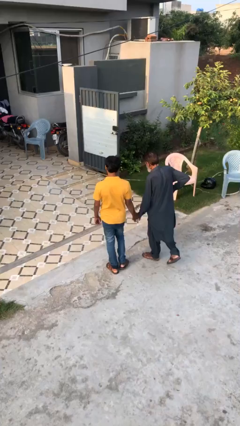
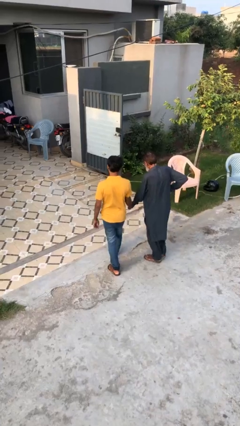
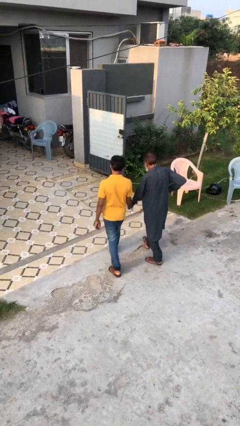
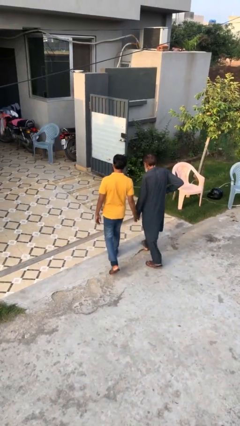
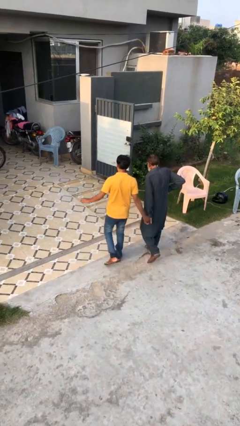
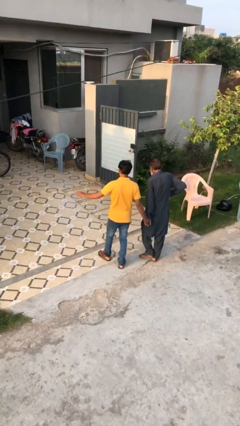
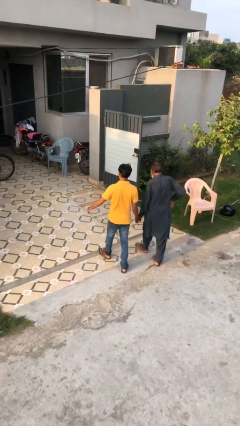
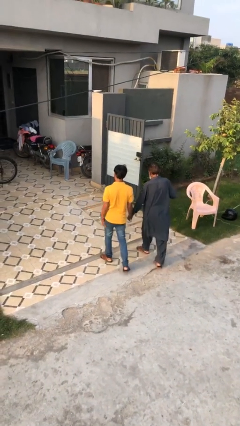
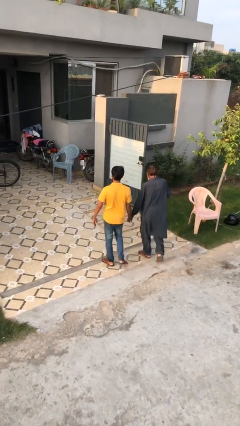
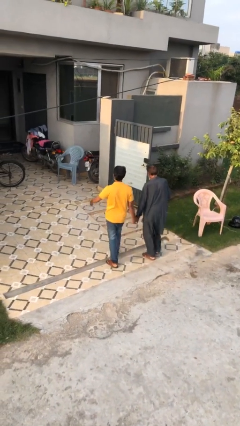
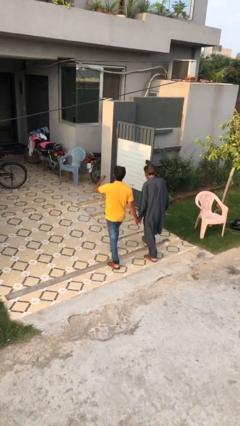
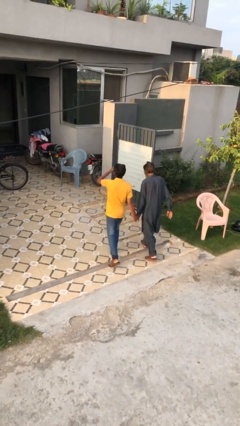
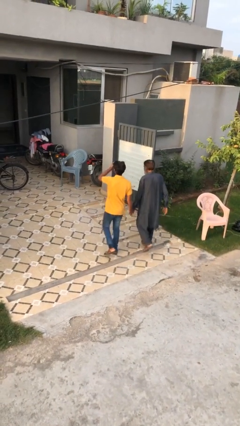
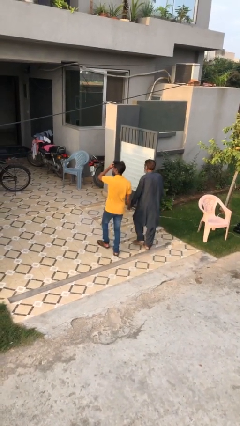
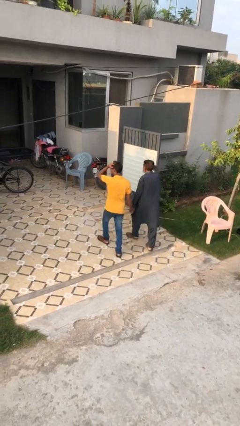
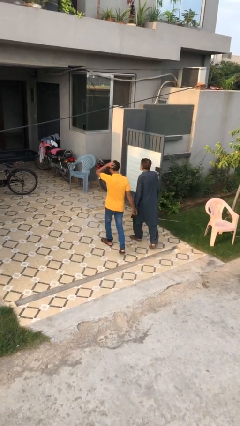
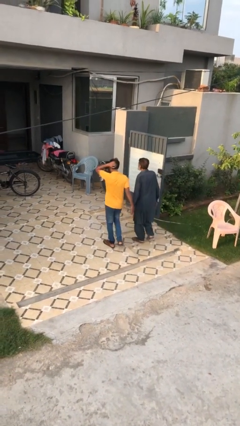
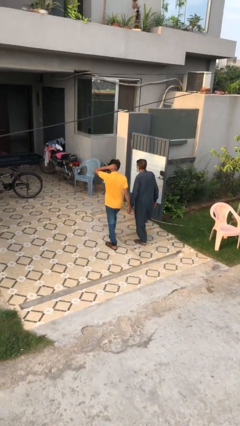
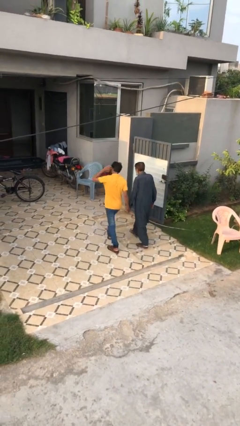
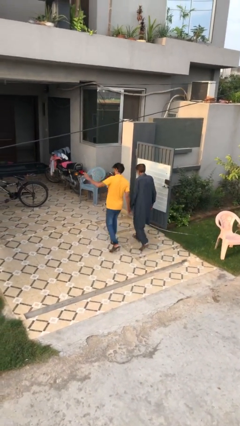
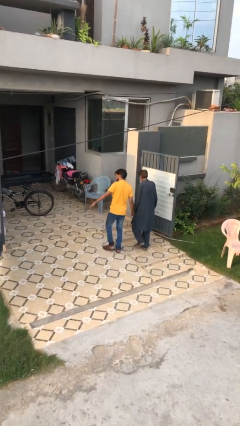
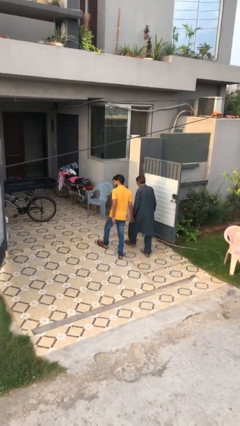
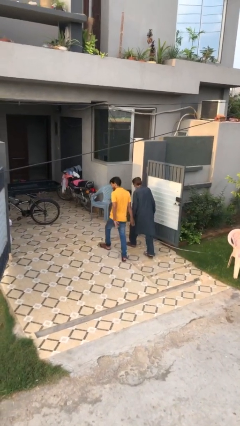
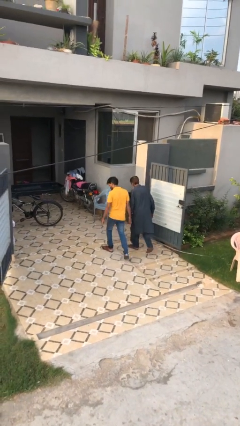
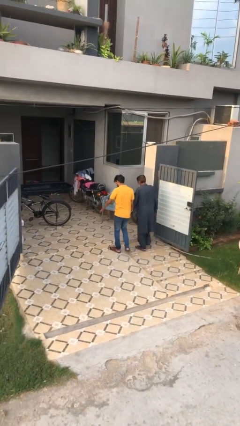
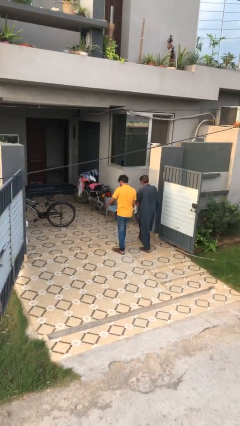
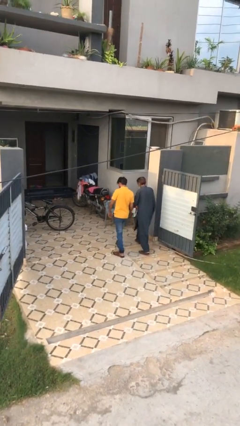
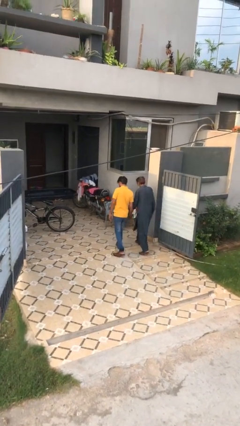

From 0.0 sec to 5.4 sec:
person holds hand

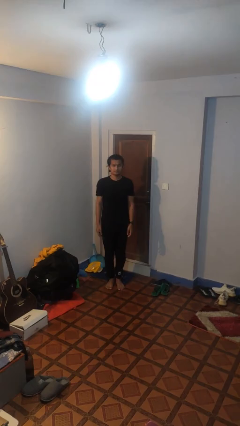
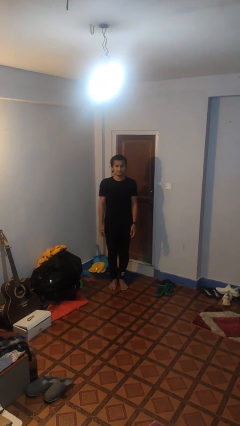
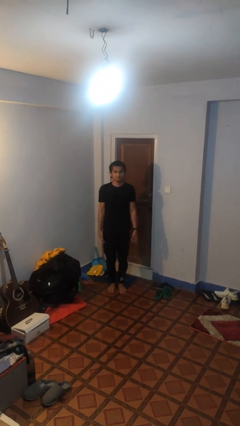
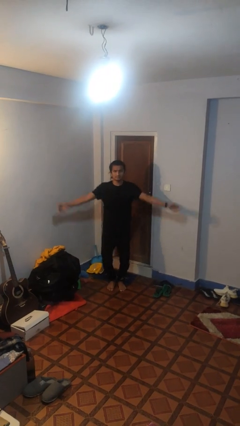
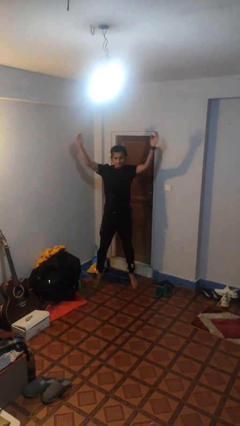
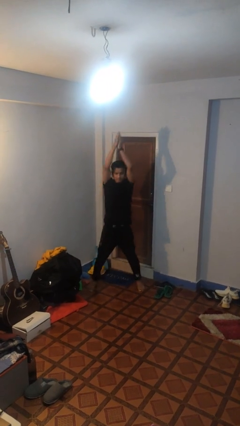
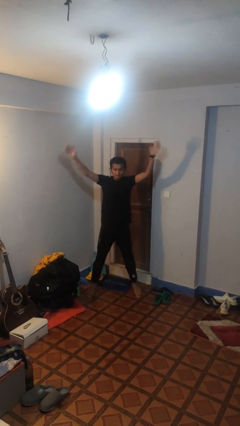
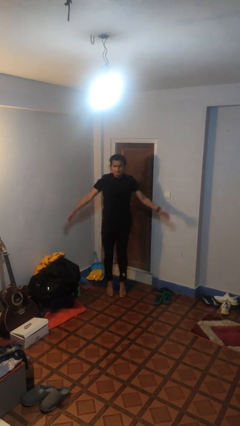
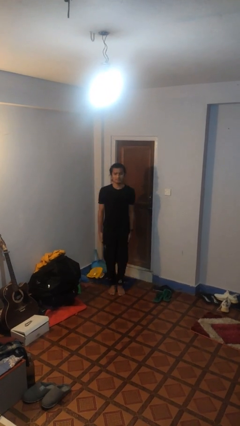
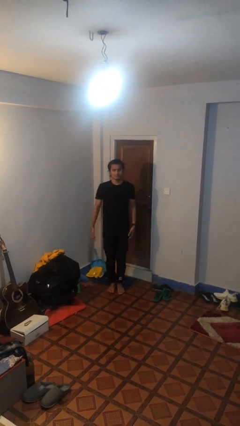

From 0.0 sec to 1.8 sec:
person exercises with jumping jacks

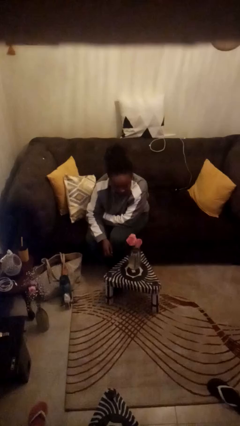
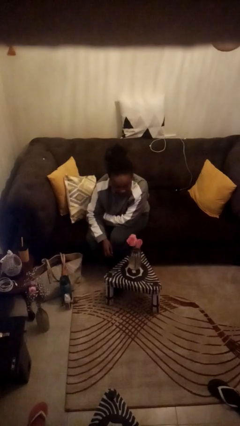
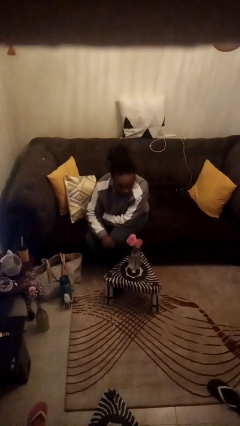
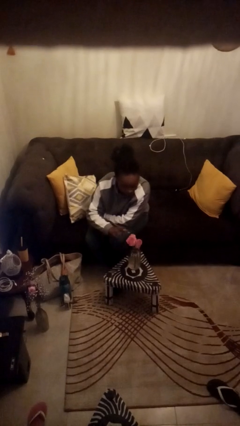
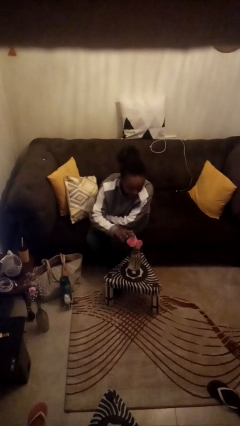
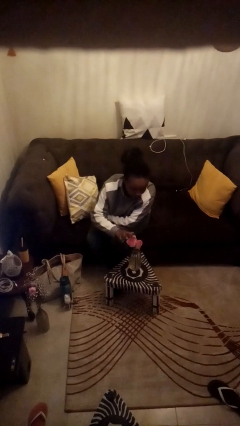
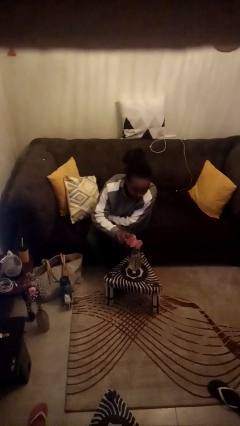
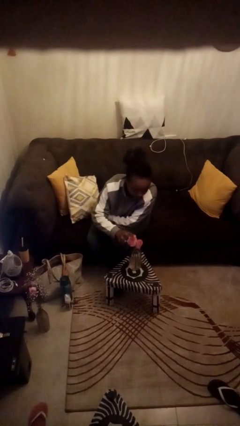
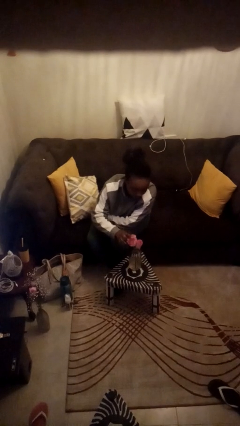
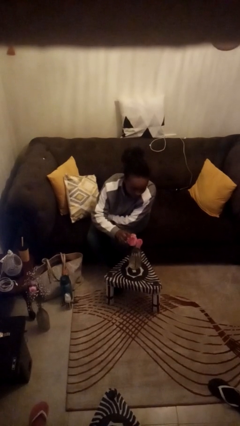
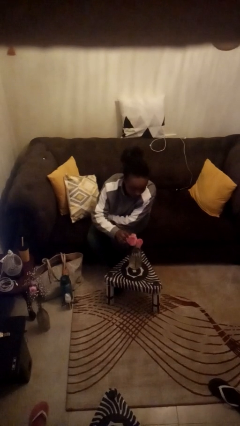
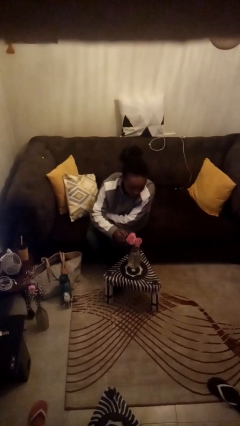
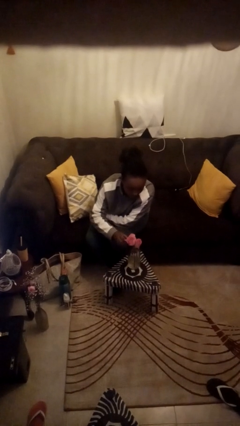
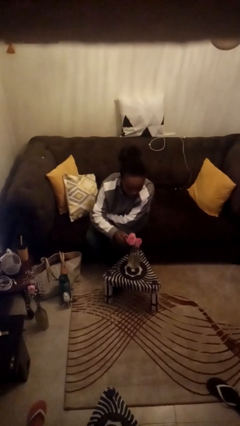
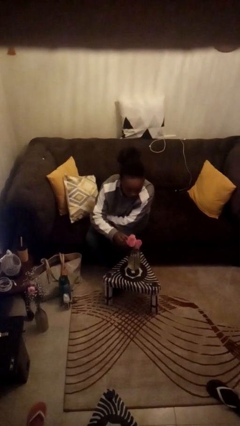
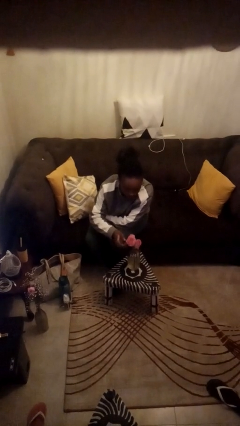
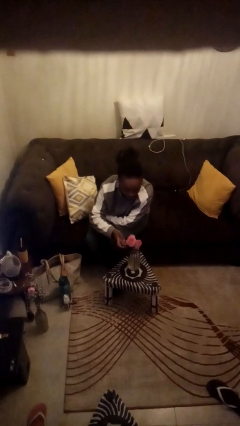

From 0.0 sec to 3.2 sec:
person arranges flowers in vase

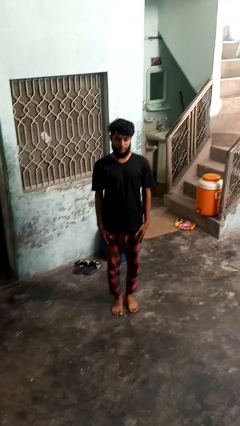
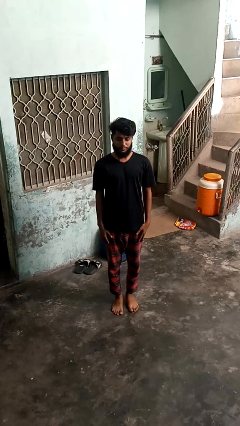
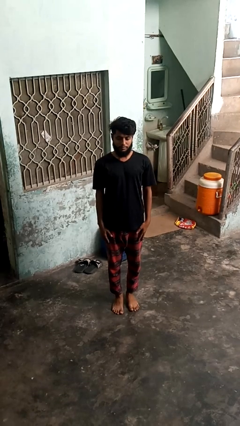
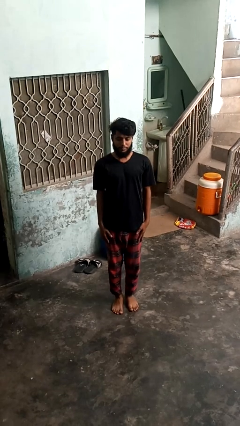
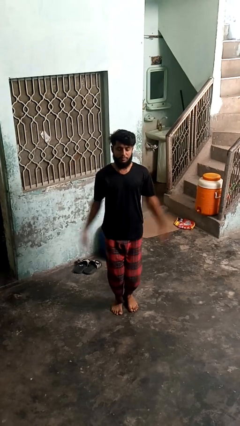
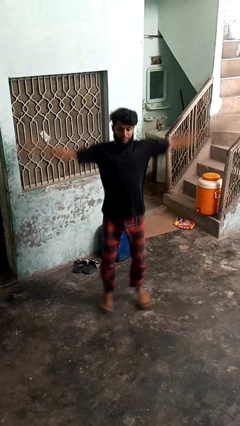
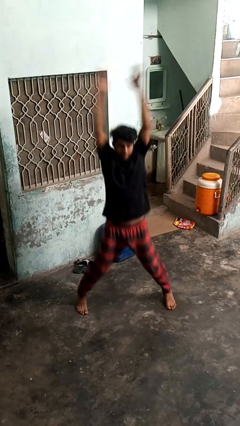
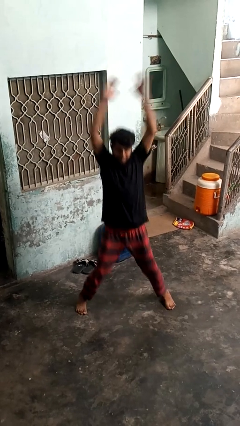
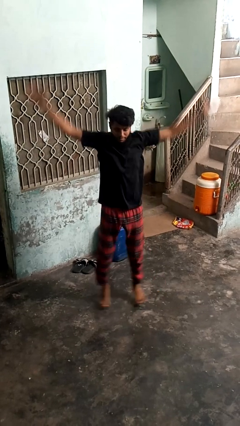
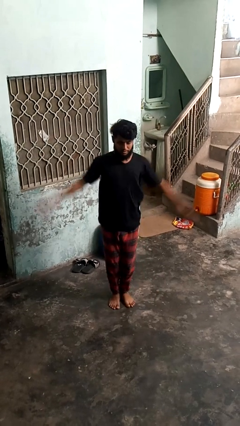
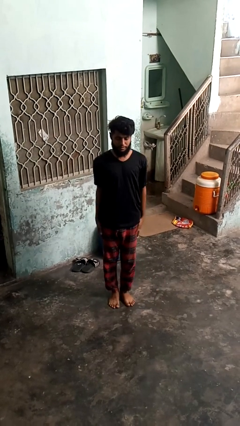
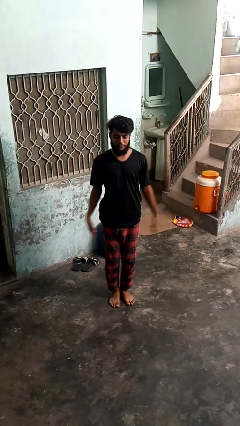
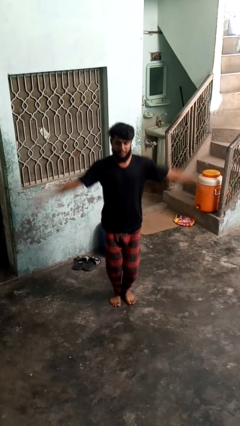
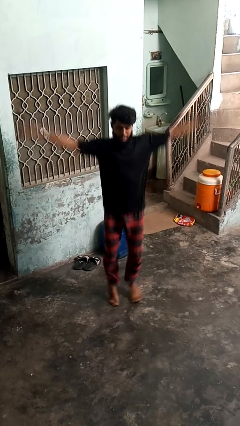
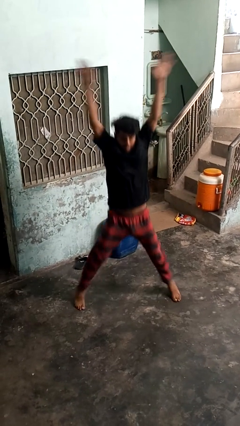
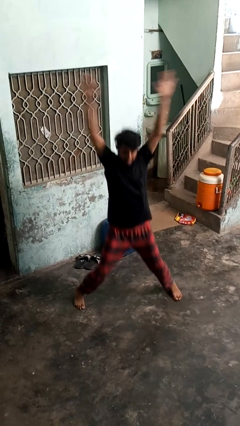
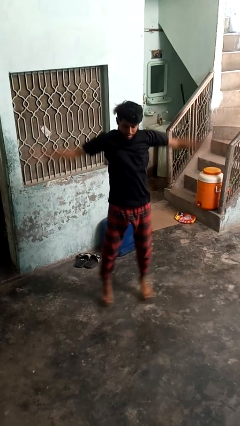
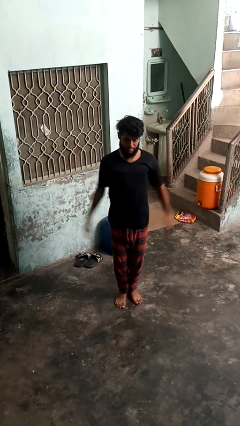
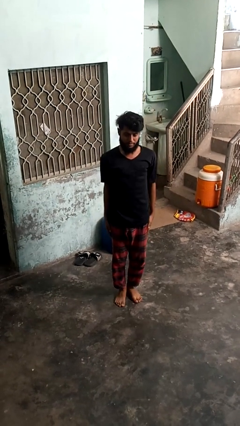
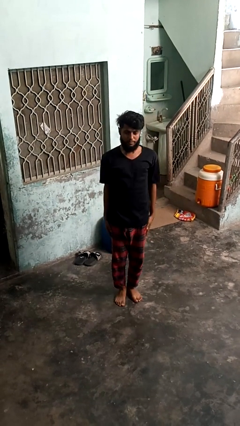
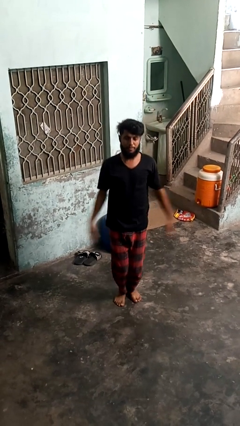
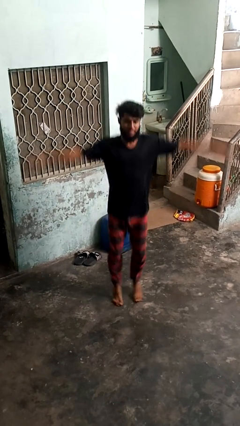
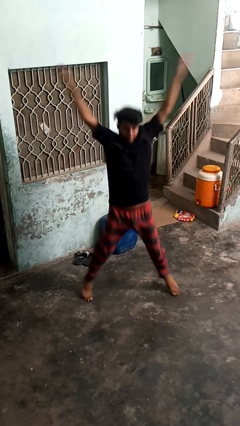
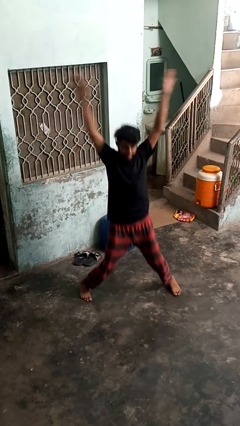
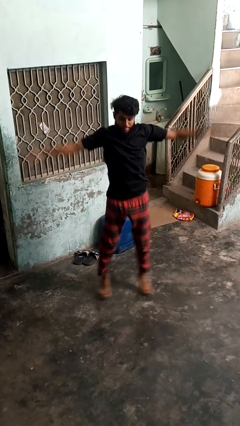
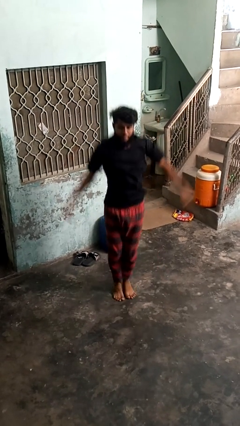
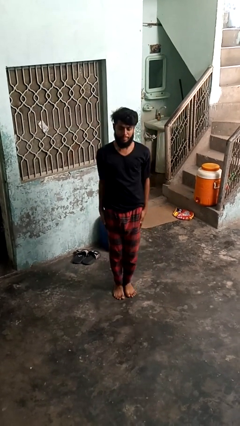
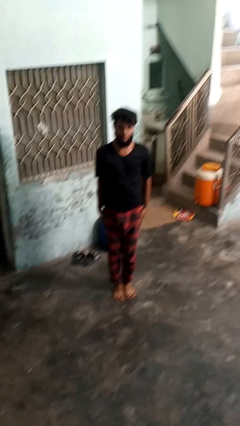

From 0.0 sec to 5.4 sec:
person exercises with situp

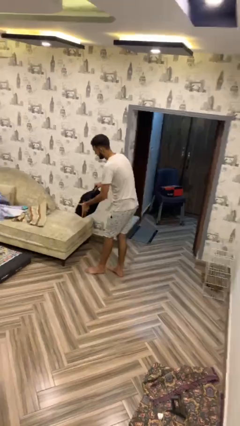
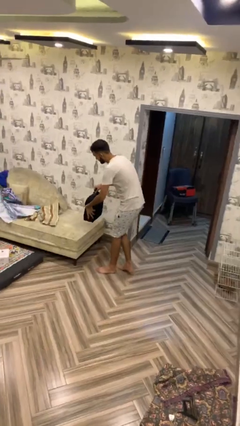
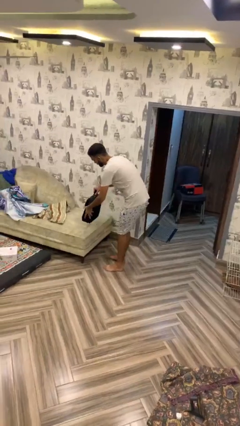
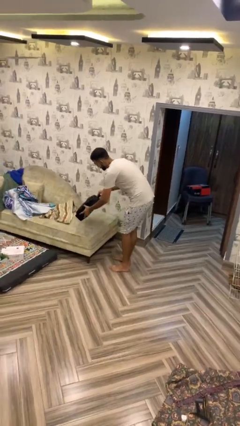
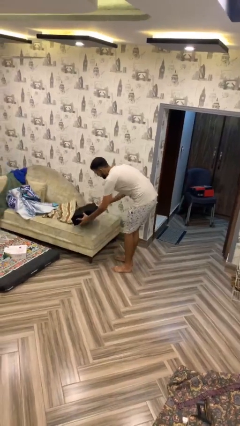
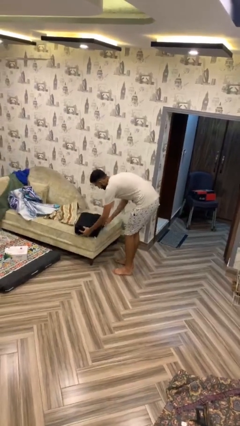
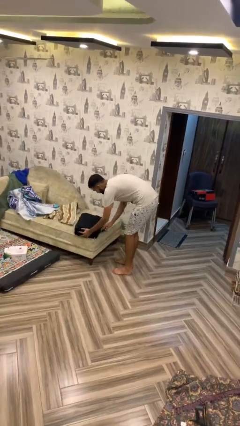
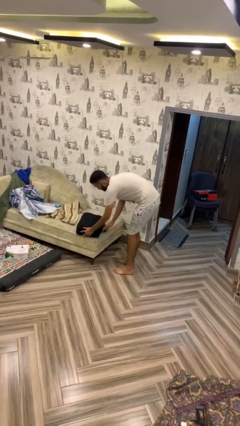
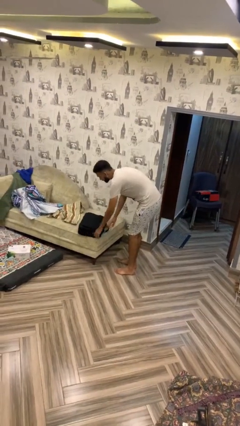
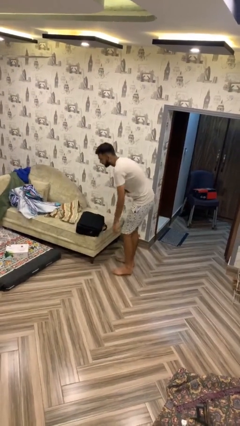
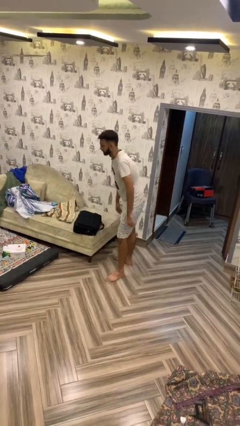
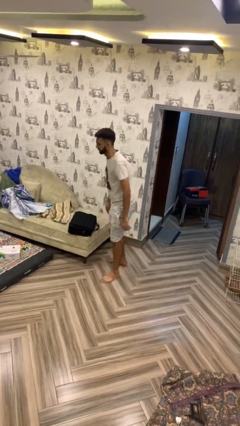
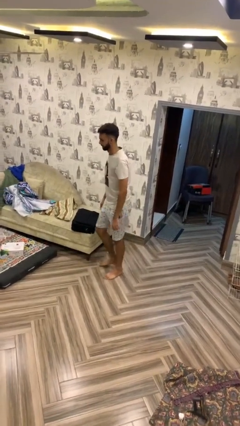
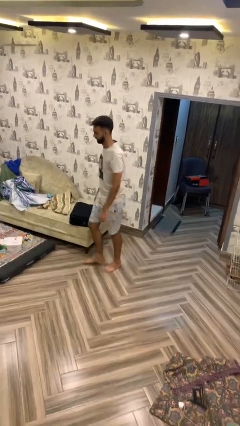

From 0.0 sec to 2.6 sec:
person puts down object on table
